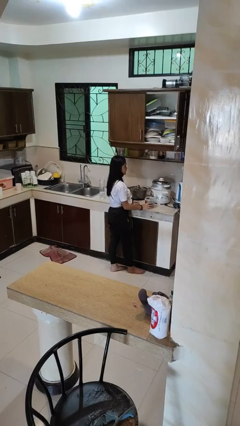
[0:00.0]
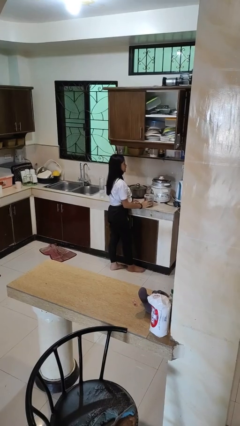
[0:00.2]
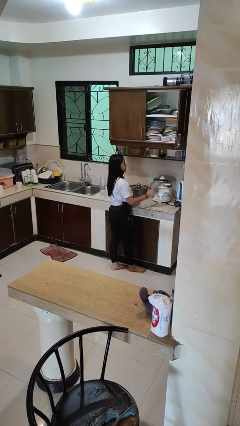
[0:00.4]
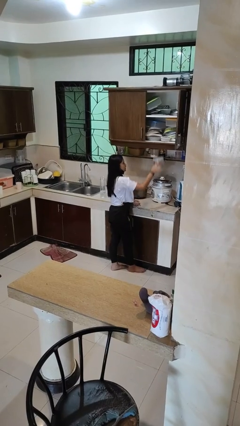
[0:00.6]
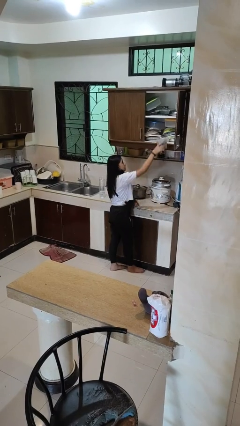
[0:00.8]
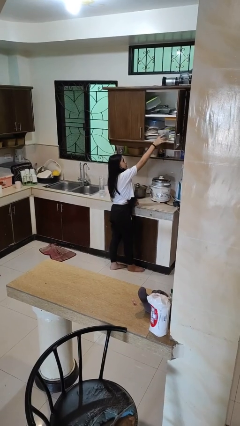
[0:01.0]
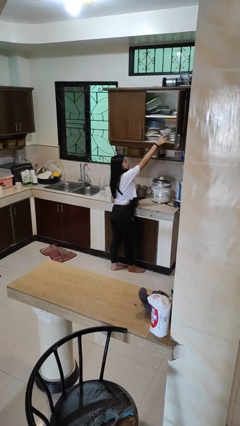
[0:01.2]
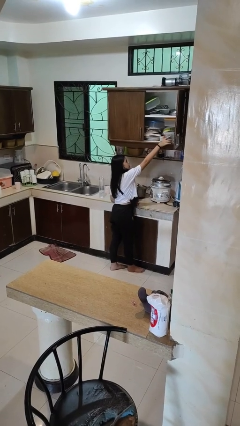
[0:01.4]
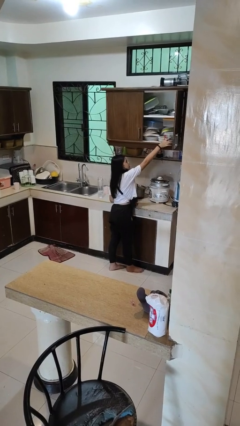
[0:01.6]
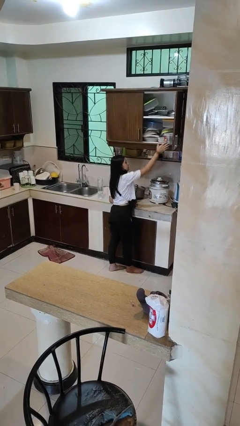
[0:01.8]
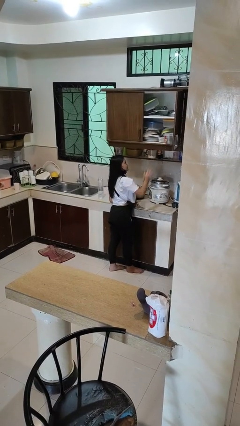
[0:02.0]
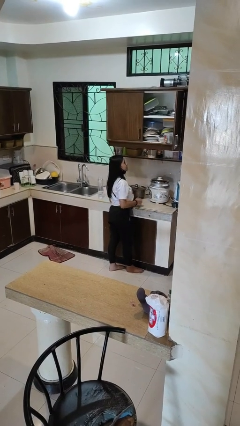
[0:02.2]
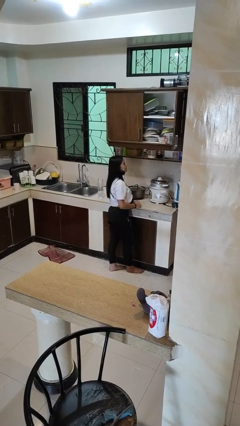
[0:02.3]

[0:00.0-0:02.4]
person puts down object on shelf

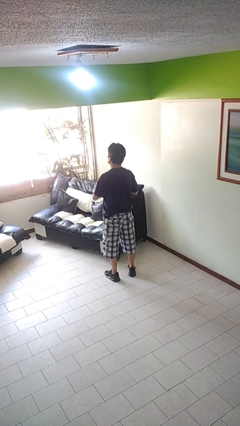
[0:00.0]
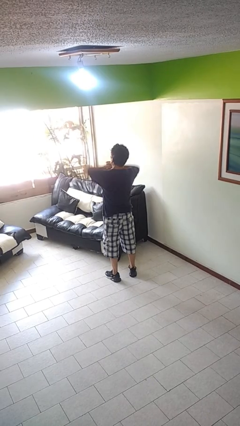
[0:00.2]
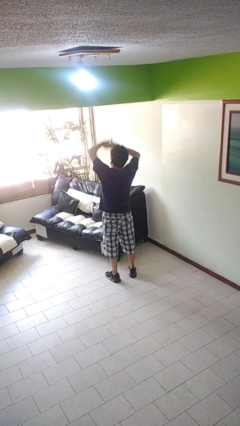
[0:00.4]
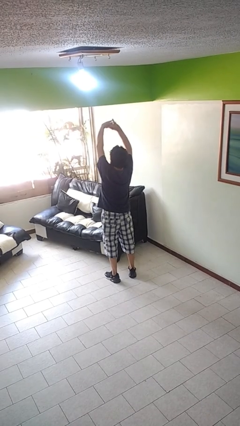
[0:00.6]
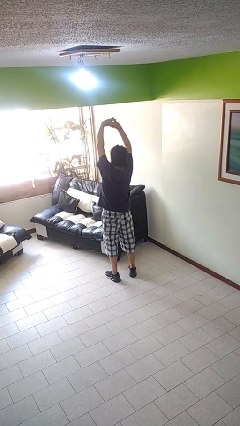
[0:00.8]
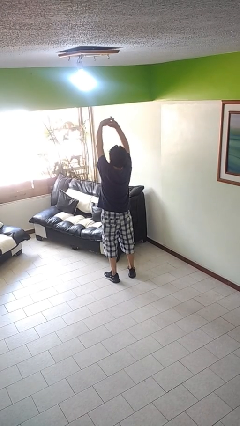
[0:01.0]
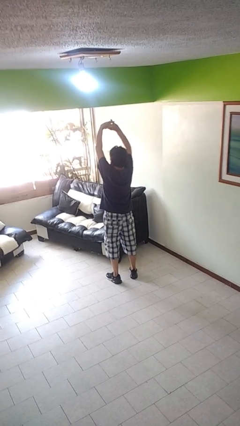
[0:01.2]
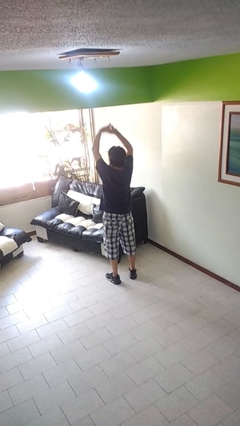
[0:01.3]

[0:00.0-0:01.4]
person stretches arms over head

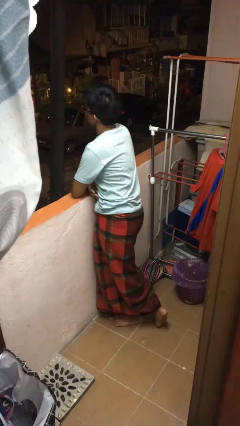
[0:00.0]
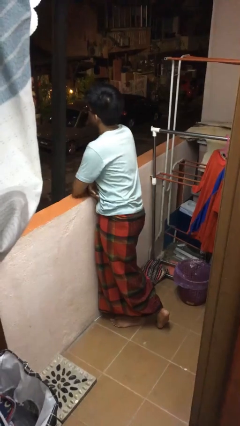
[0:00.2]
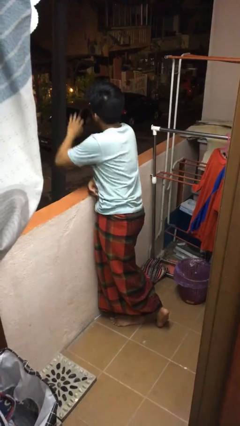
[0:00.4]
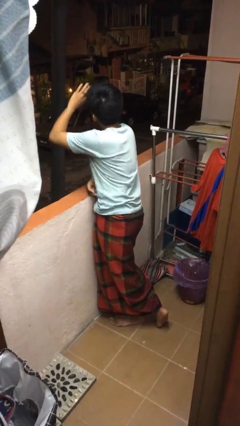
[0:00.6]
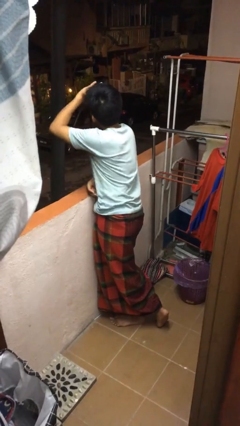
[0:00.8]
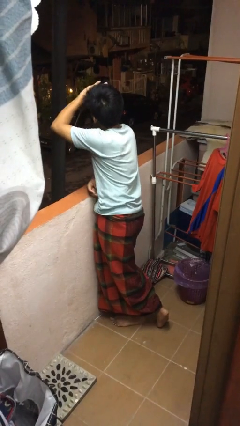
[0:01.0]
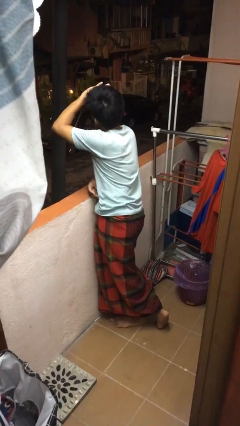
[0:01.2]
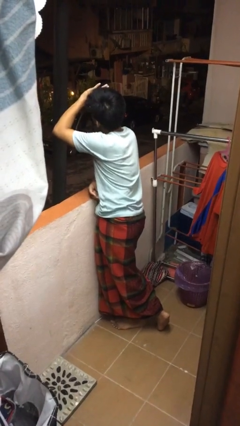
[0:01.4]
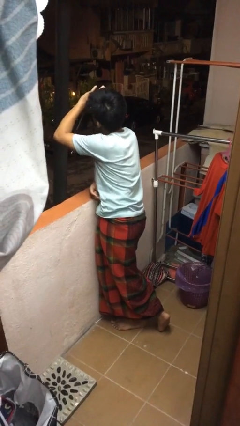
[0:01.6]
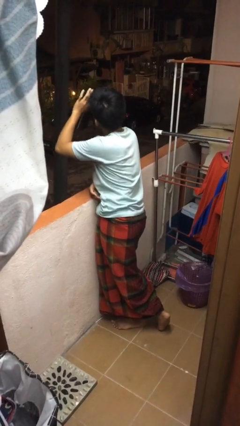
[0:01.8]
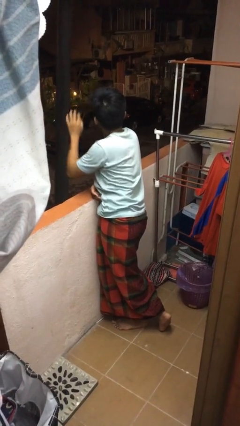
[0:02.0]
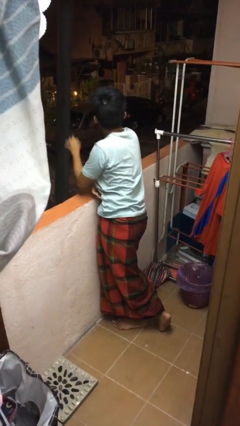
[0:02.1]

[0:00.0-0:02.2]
person shades eyes

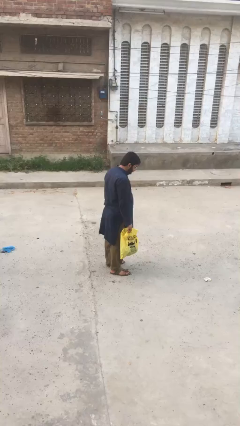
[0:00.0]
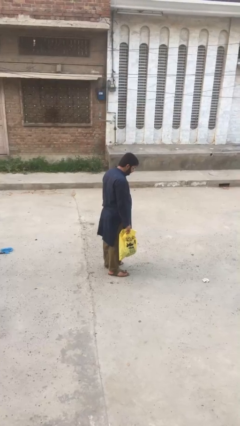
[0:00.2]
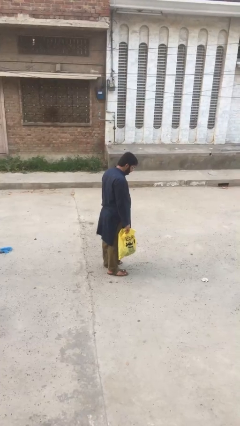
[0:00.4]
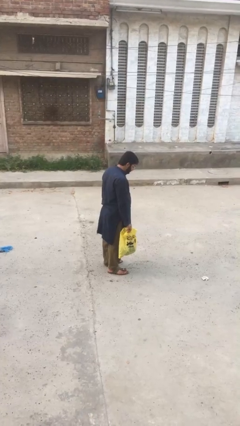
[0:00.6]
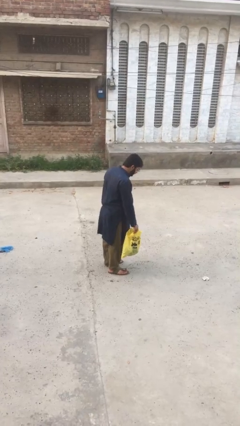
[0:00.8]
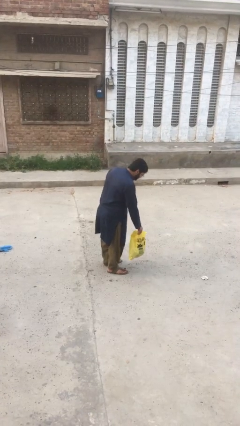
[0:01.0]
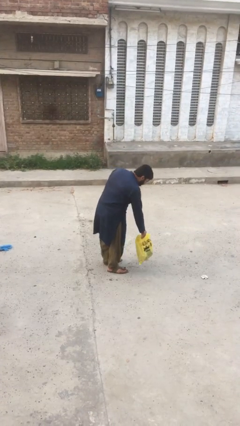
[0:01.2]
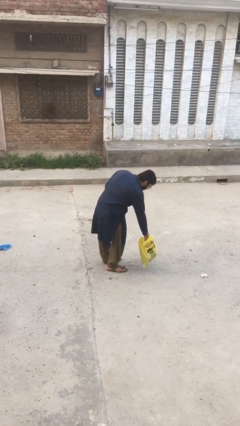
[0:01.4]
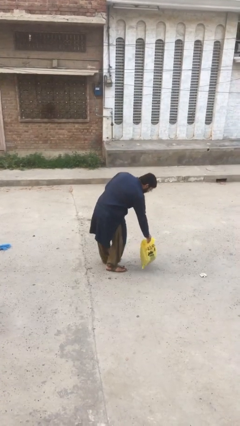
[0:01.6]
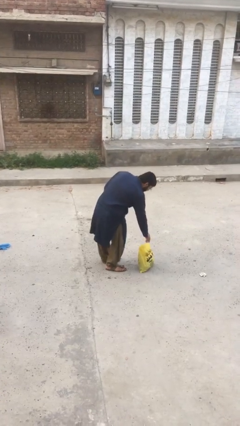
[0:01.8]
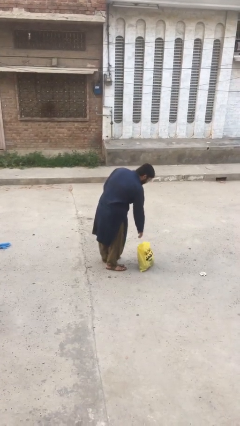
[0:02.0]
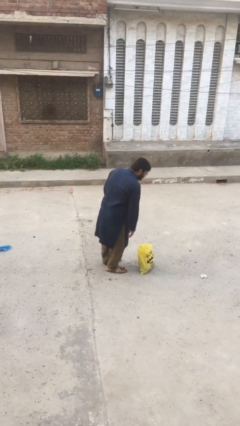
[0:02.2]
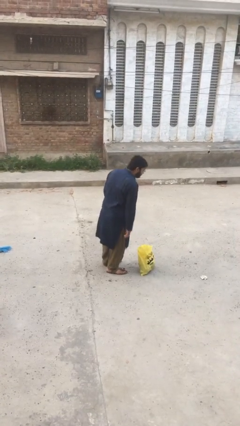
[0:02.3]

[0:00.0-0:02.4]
person puts down object on floor

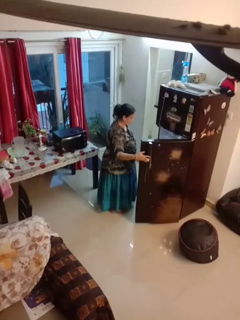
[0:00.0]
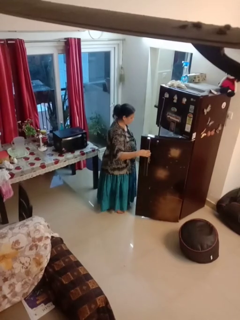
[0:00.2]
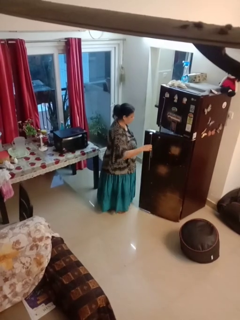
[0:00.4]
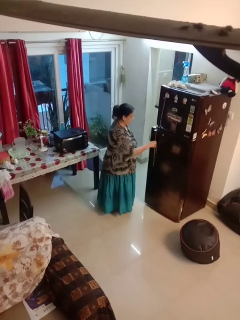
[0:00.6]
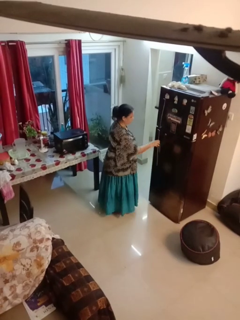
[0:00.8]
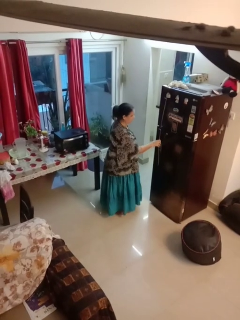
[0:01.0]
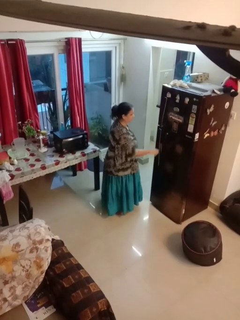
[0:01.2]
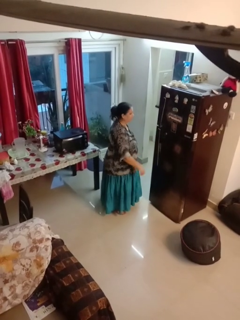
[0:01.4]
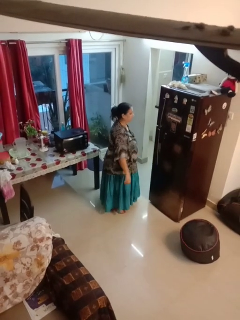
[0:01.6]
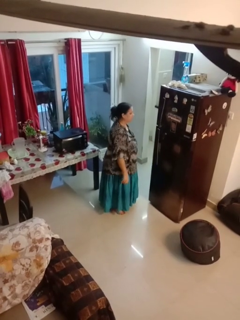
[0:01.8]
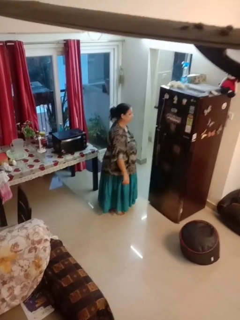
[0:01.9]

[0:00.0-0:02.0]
person closes refrigerator

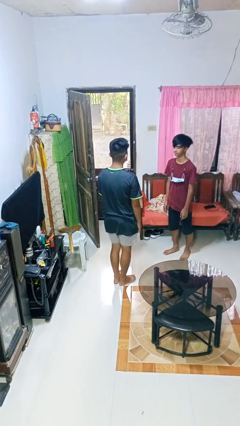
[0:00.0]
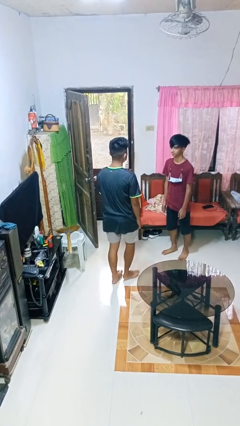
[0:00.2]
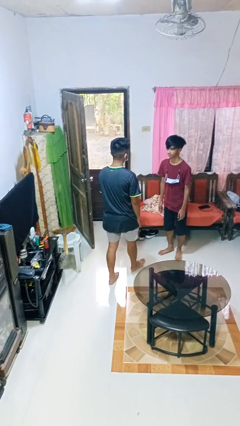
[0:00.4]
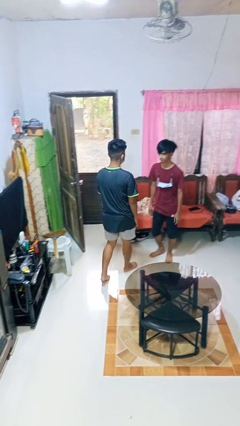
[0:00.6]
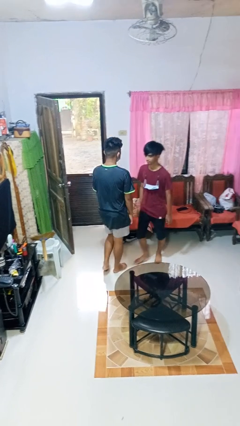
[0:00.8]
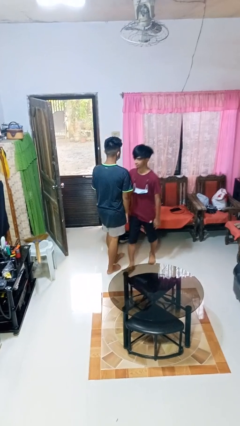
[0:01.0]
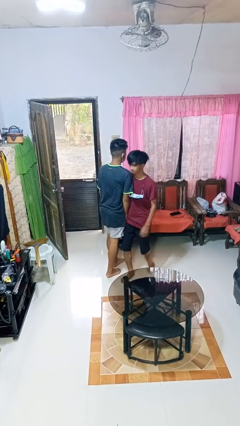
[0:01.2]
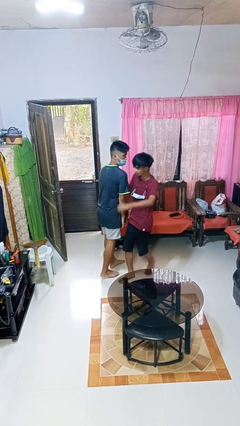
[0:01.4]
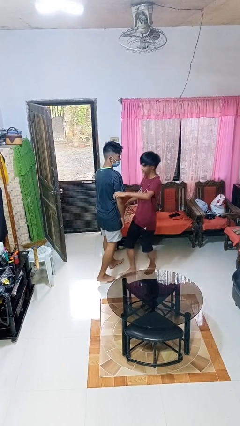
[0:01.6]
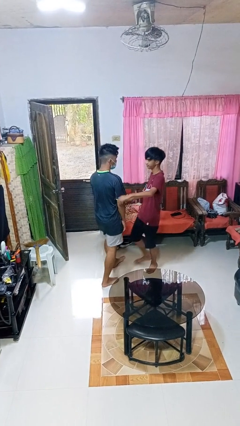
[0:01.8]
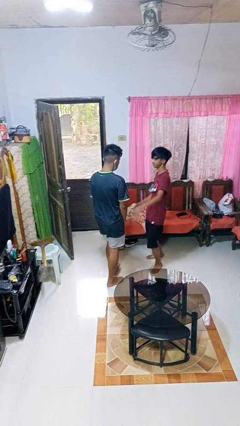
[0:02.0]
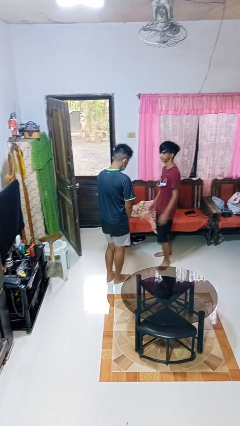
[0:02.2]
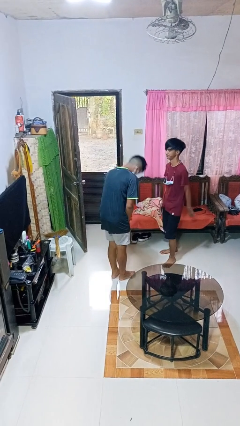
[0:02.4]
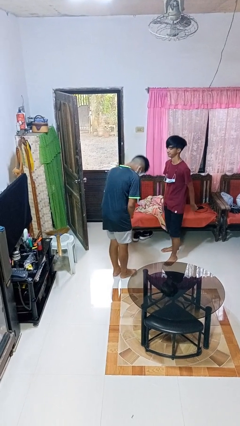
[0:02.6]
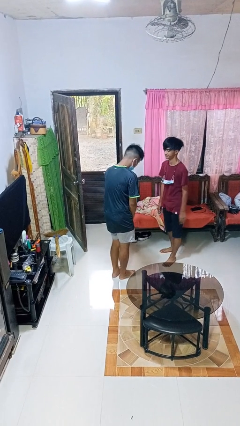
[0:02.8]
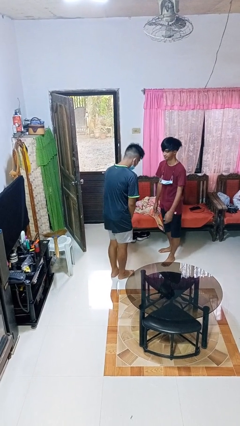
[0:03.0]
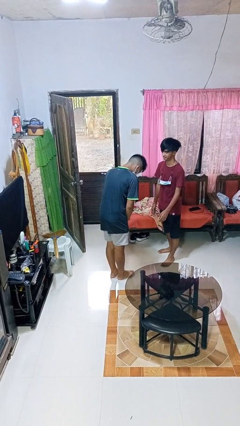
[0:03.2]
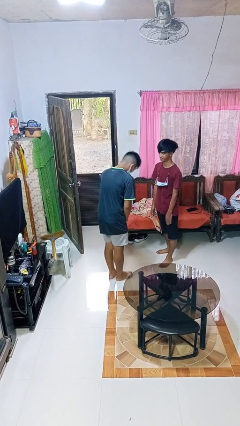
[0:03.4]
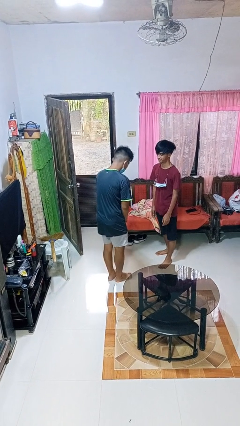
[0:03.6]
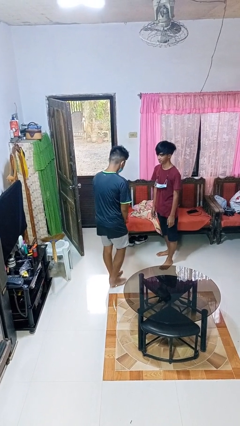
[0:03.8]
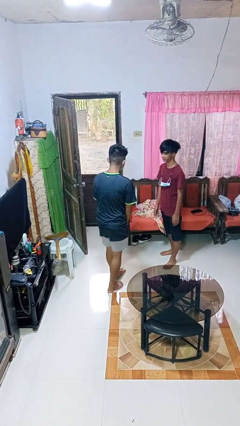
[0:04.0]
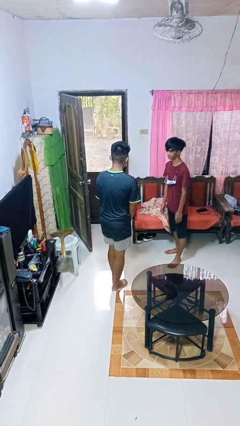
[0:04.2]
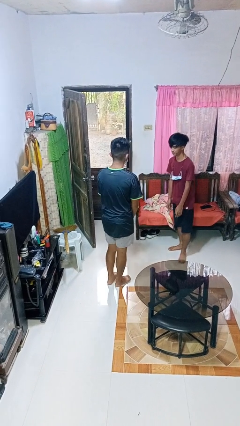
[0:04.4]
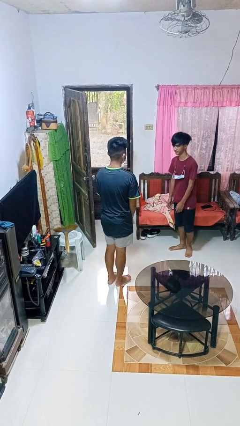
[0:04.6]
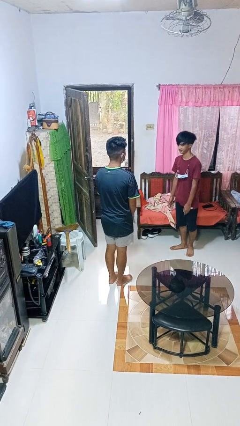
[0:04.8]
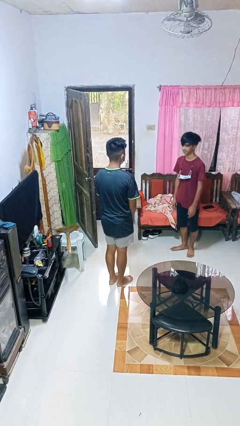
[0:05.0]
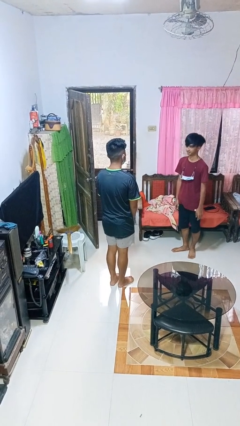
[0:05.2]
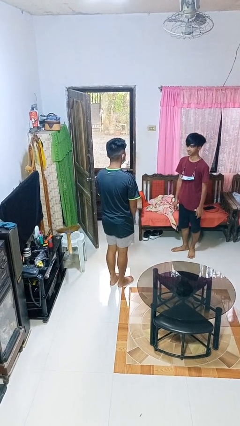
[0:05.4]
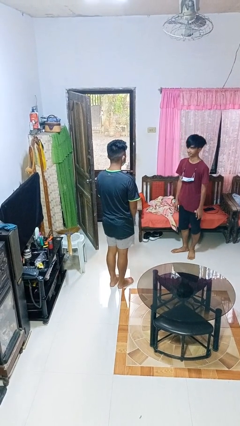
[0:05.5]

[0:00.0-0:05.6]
person bumps into person

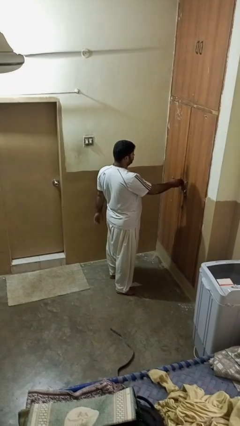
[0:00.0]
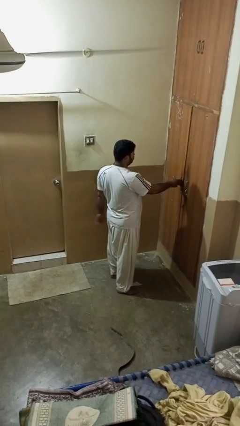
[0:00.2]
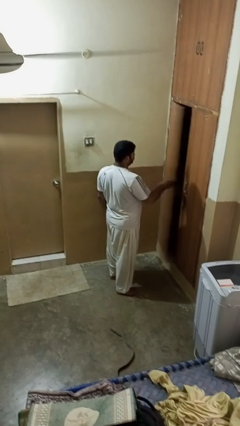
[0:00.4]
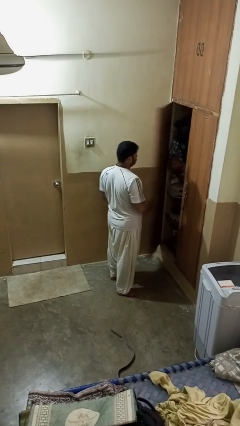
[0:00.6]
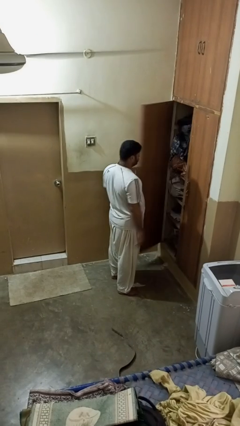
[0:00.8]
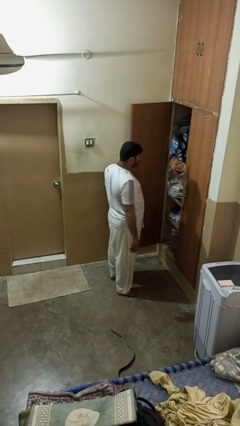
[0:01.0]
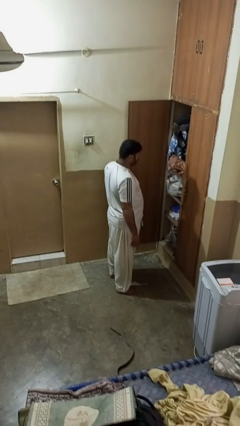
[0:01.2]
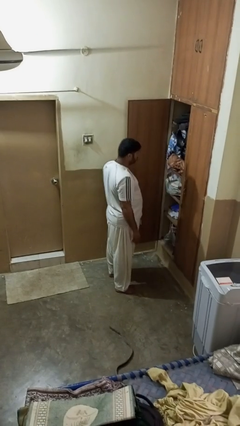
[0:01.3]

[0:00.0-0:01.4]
person opens closet door
